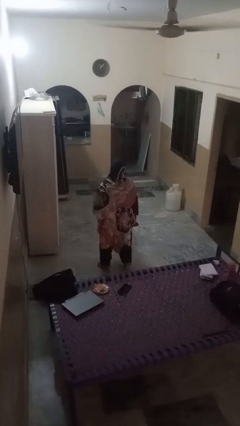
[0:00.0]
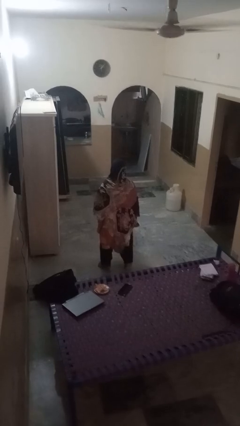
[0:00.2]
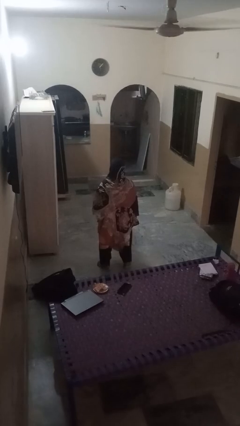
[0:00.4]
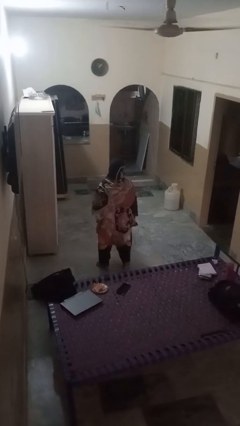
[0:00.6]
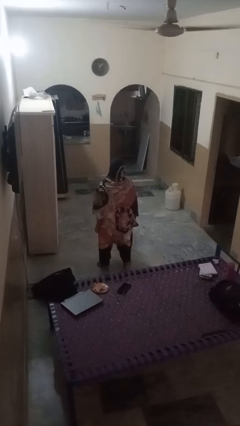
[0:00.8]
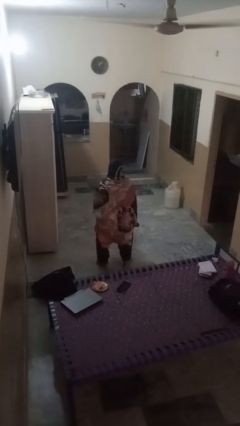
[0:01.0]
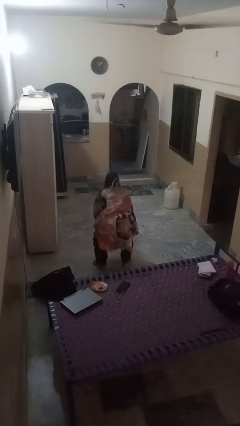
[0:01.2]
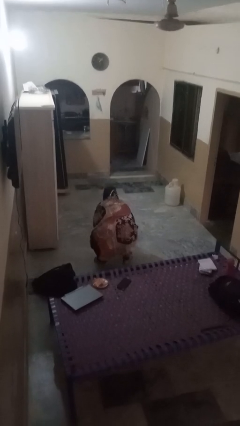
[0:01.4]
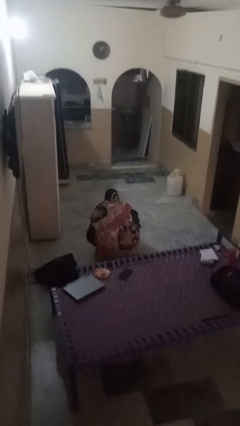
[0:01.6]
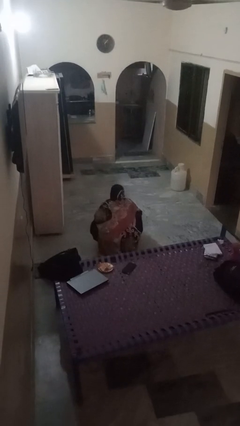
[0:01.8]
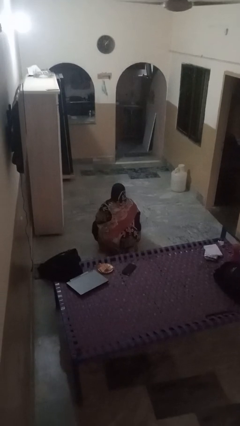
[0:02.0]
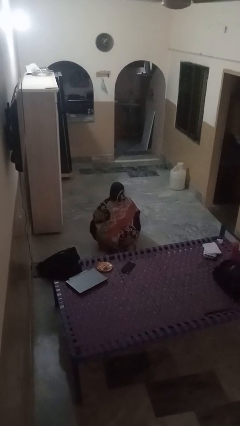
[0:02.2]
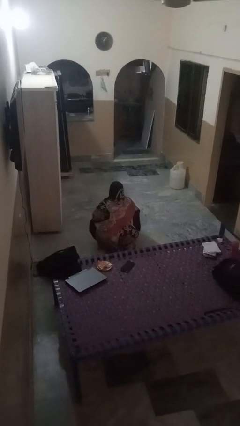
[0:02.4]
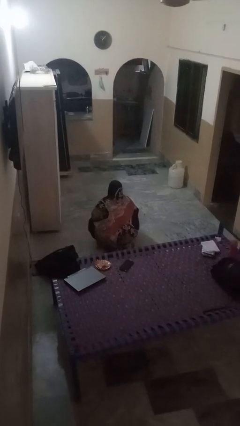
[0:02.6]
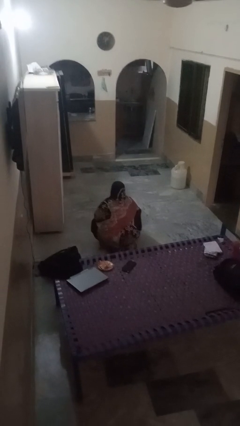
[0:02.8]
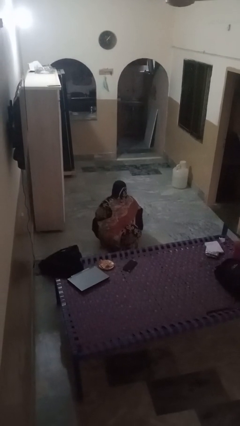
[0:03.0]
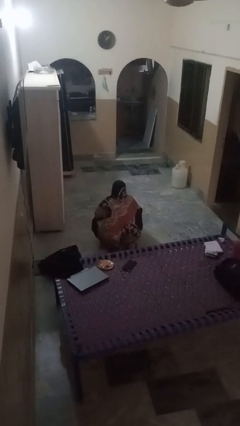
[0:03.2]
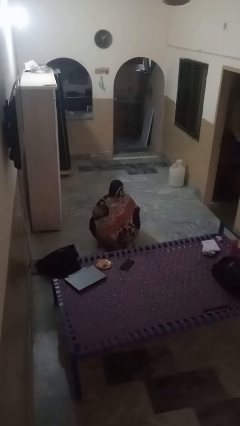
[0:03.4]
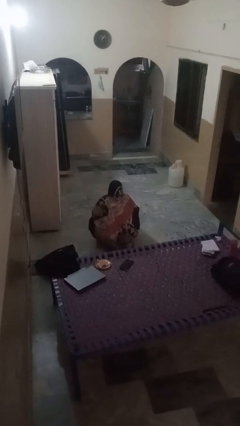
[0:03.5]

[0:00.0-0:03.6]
person squats

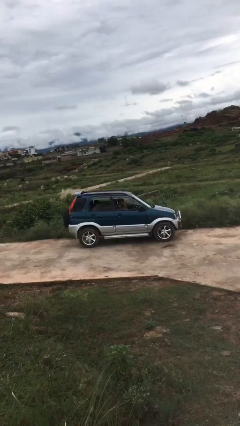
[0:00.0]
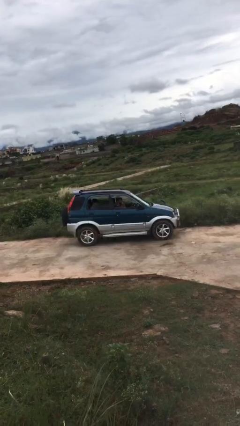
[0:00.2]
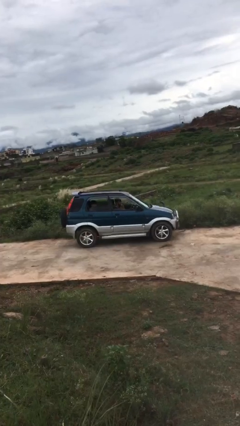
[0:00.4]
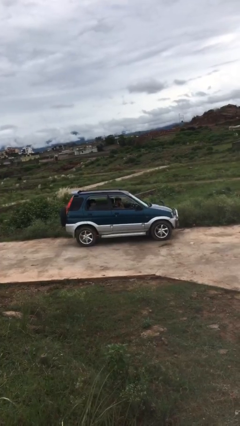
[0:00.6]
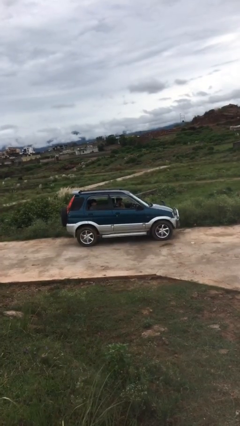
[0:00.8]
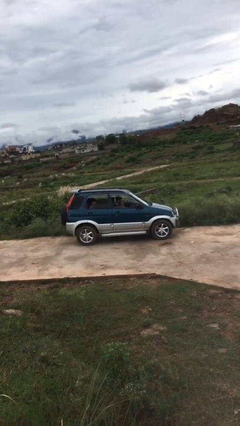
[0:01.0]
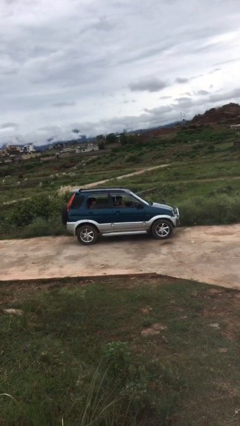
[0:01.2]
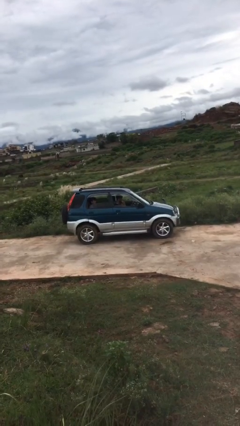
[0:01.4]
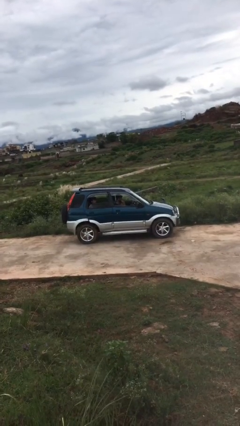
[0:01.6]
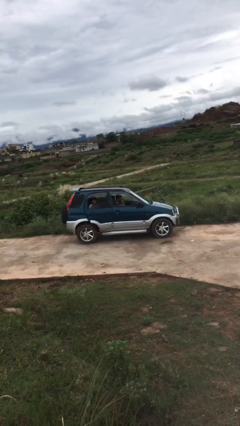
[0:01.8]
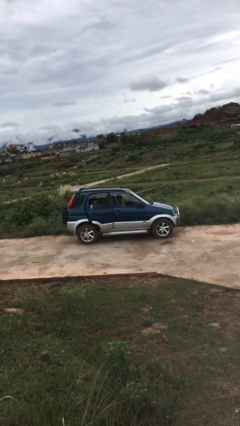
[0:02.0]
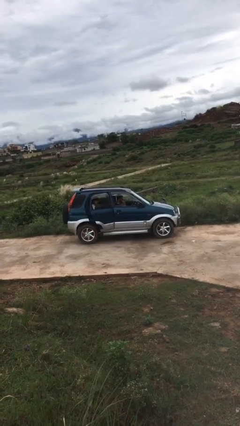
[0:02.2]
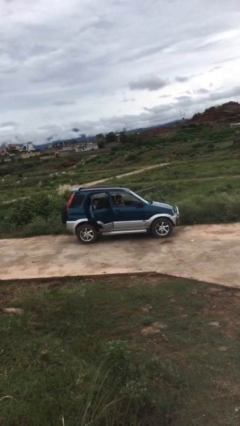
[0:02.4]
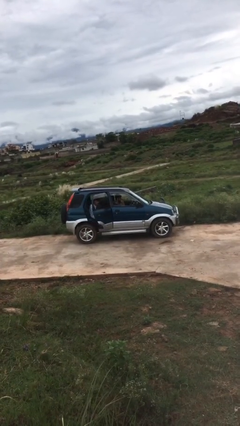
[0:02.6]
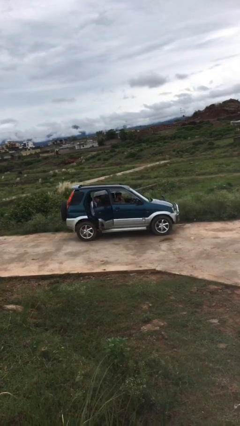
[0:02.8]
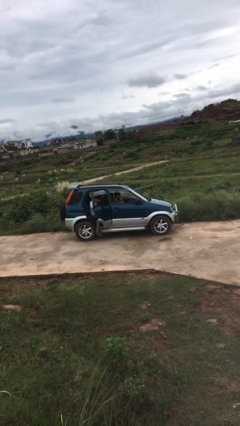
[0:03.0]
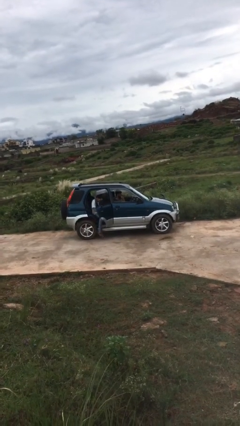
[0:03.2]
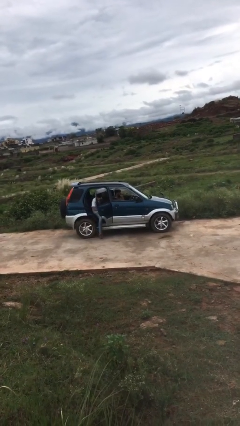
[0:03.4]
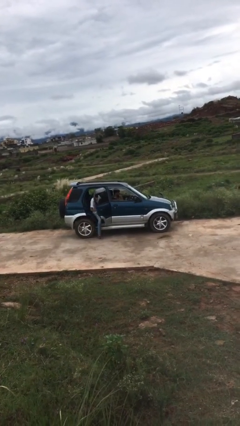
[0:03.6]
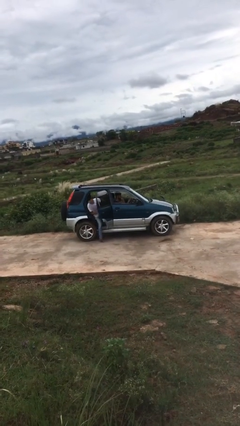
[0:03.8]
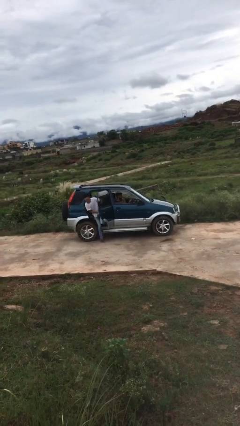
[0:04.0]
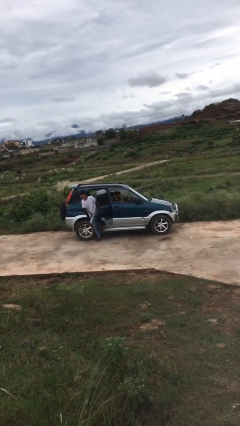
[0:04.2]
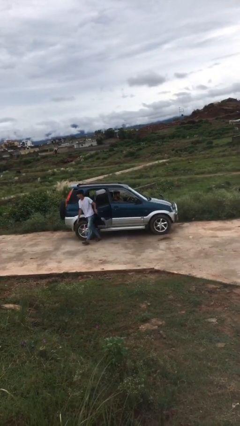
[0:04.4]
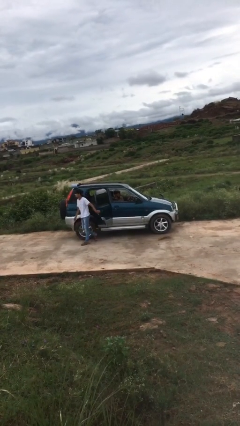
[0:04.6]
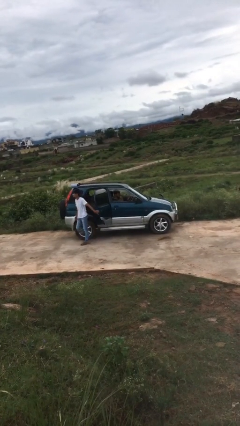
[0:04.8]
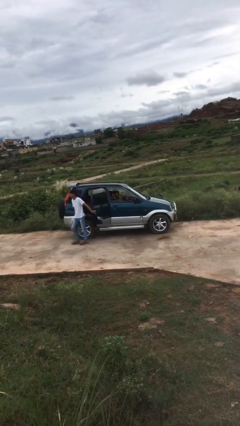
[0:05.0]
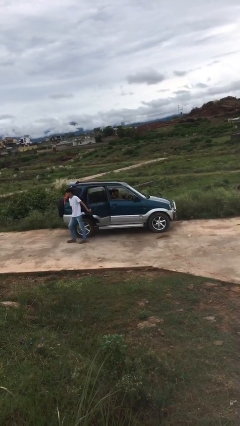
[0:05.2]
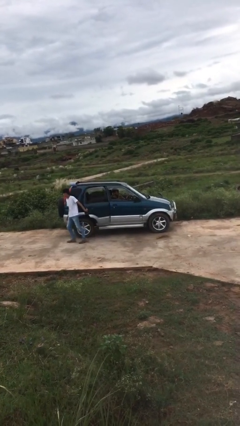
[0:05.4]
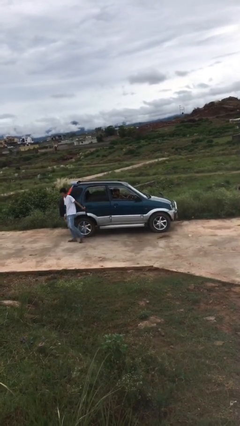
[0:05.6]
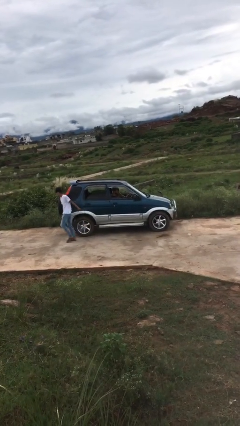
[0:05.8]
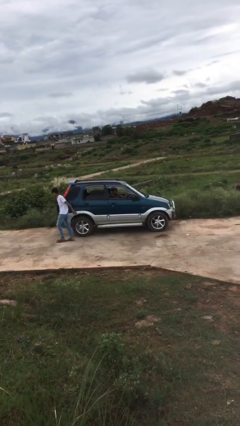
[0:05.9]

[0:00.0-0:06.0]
car drops off person

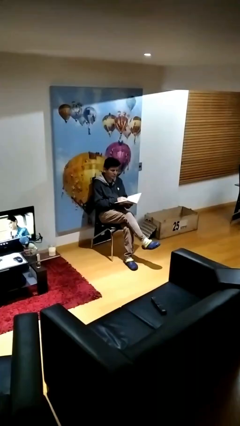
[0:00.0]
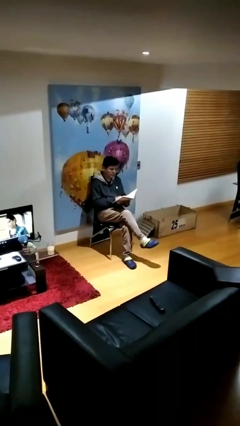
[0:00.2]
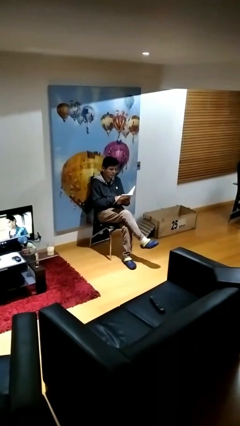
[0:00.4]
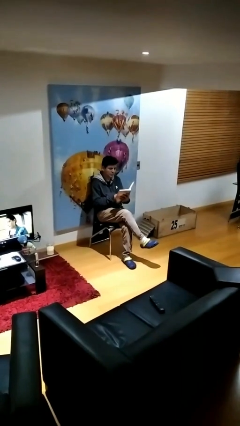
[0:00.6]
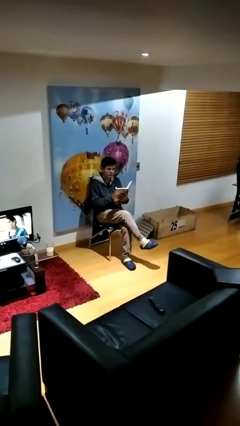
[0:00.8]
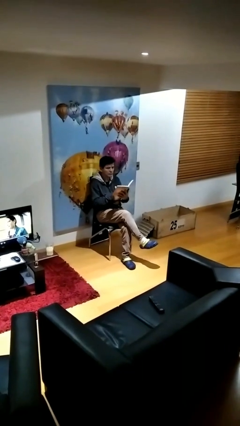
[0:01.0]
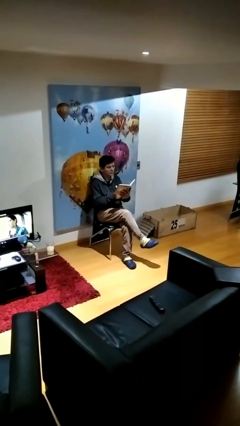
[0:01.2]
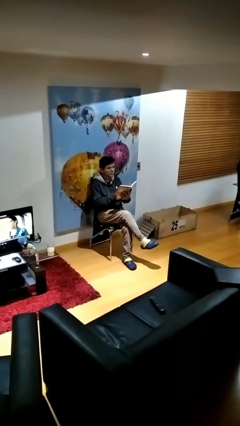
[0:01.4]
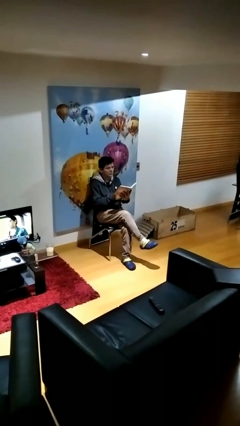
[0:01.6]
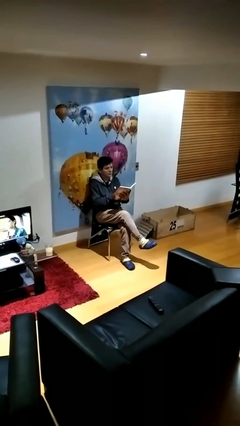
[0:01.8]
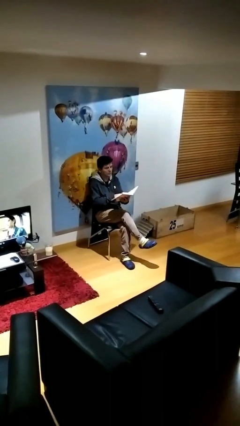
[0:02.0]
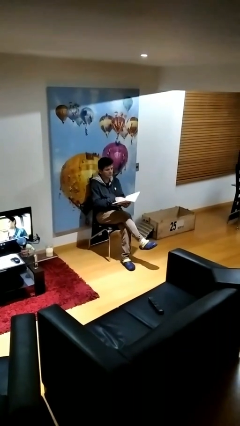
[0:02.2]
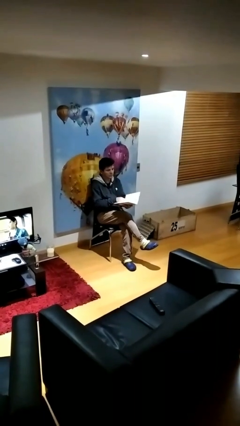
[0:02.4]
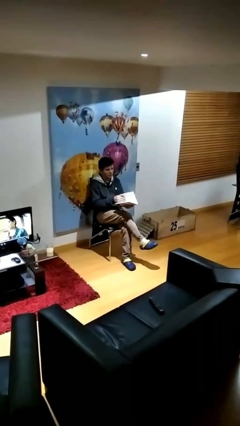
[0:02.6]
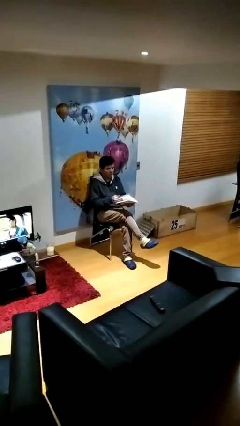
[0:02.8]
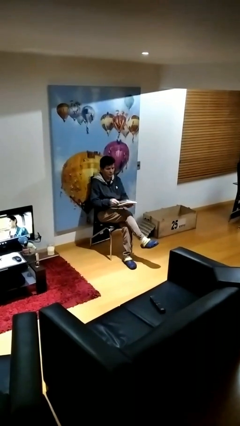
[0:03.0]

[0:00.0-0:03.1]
person reads document

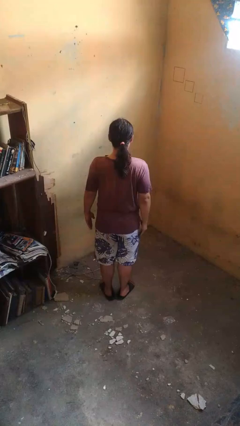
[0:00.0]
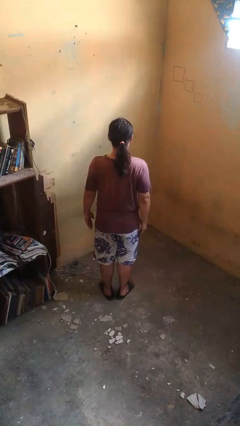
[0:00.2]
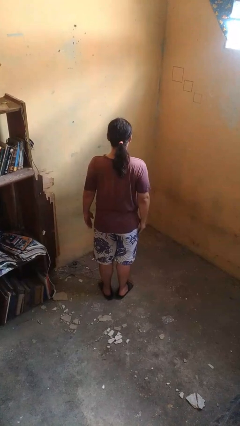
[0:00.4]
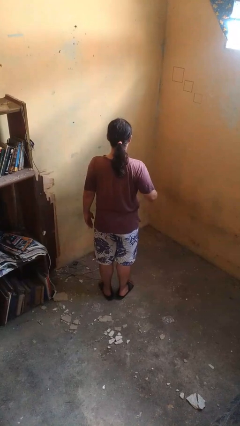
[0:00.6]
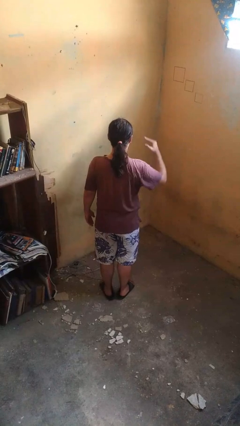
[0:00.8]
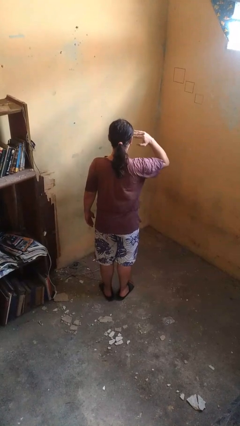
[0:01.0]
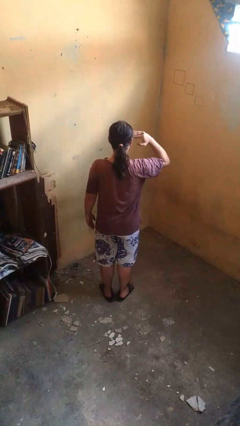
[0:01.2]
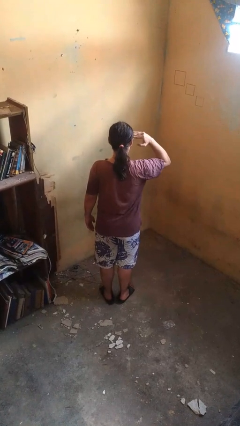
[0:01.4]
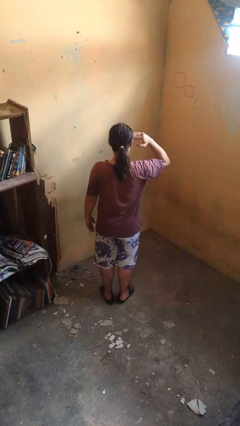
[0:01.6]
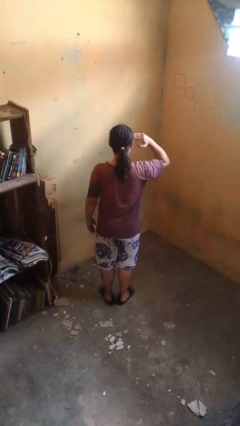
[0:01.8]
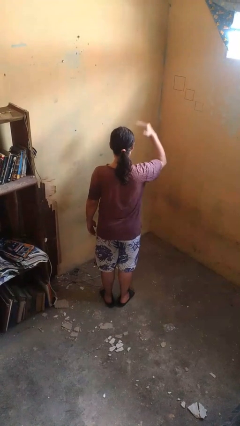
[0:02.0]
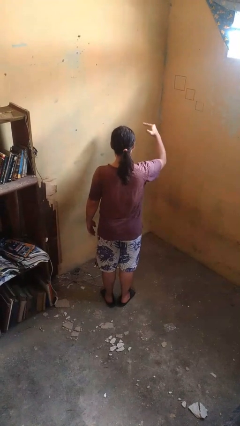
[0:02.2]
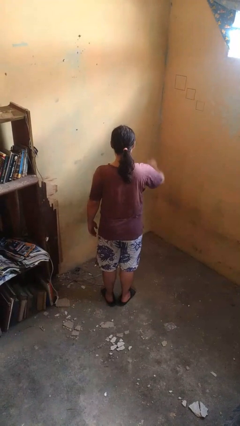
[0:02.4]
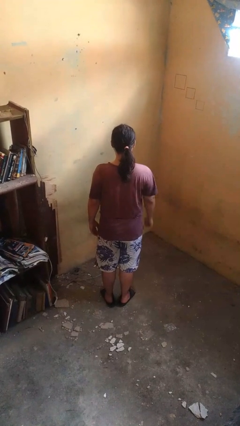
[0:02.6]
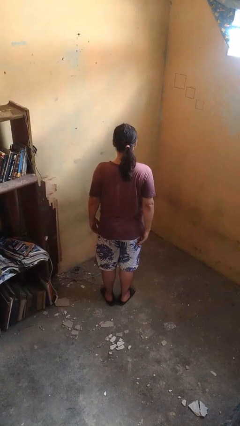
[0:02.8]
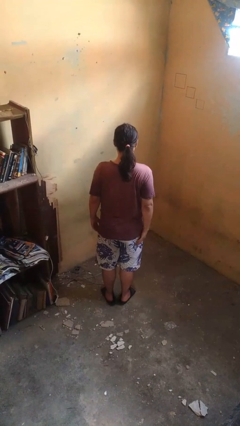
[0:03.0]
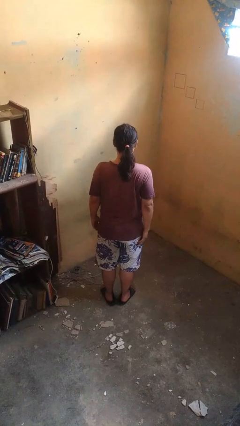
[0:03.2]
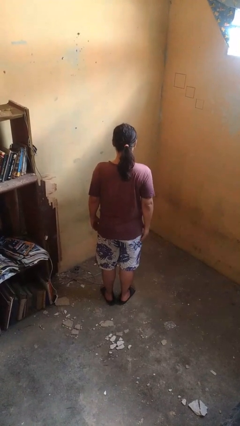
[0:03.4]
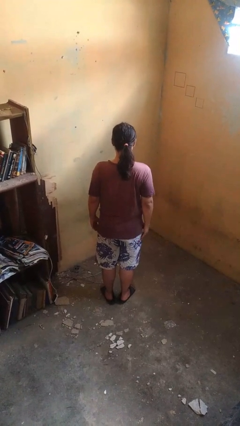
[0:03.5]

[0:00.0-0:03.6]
person salutes

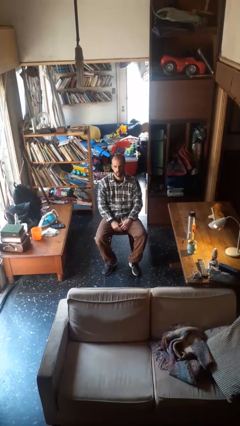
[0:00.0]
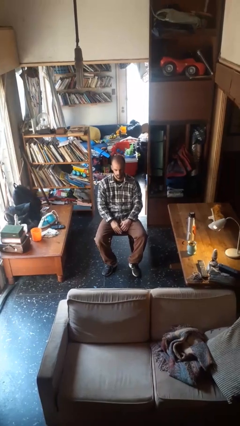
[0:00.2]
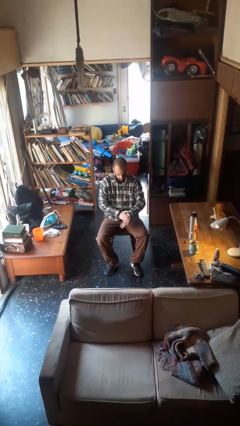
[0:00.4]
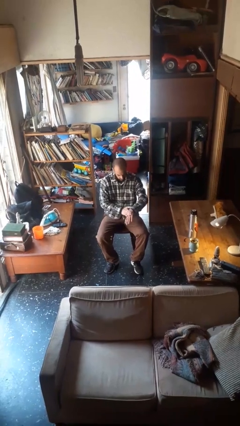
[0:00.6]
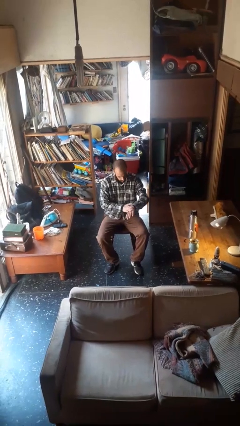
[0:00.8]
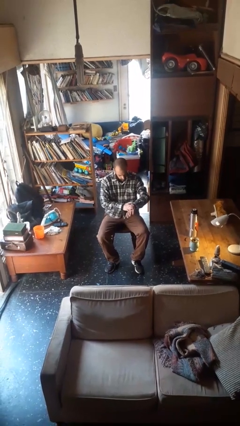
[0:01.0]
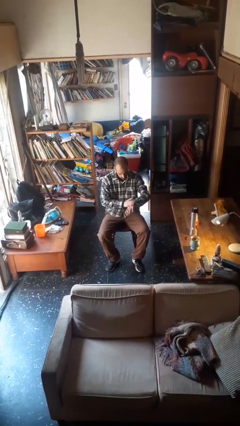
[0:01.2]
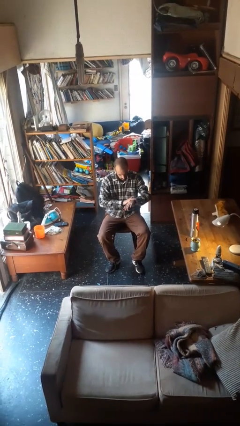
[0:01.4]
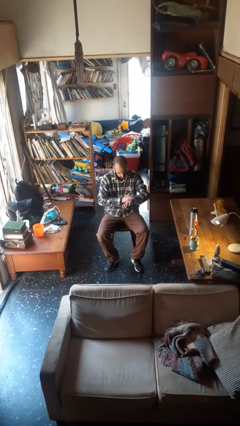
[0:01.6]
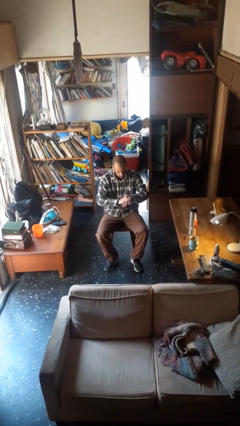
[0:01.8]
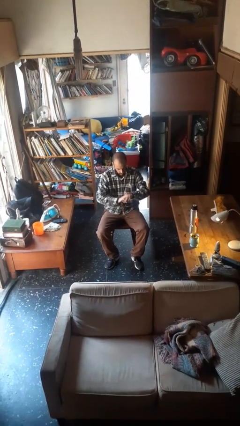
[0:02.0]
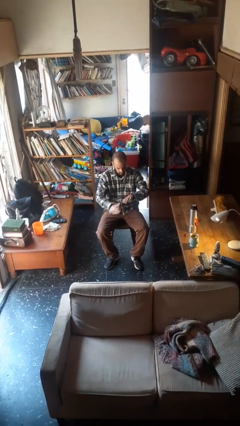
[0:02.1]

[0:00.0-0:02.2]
person swats bug
